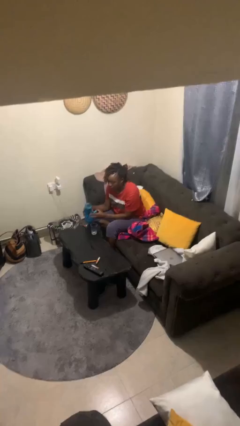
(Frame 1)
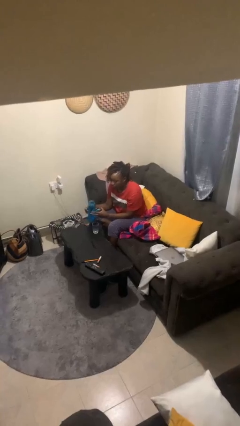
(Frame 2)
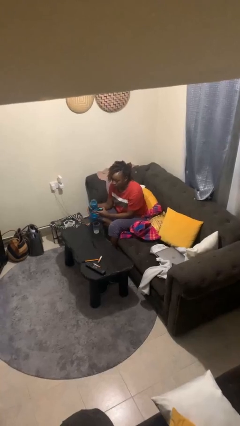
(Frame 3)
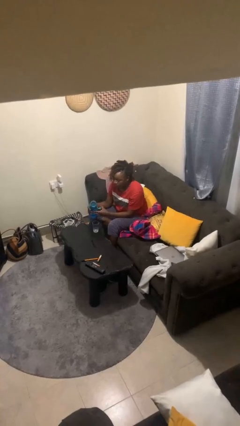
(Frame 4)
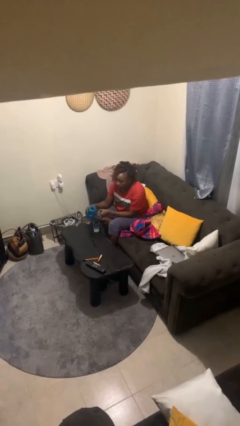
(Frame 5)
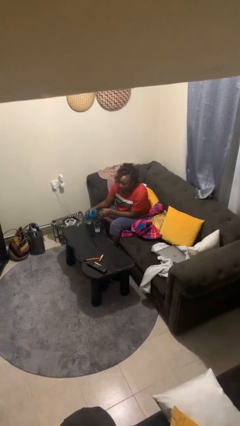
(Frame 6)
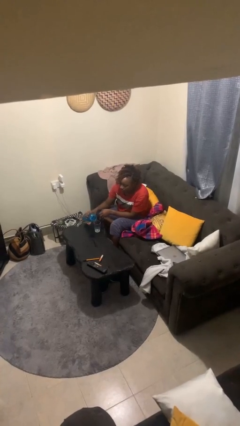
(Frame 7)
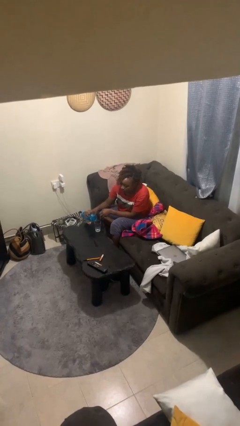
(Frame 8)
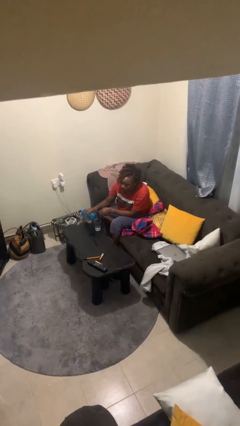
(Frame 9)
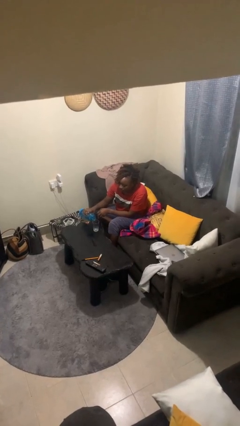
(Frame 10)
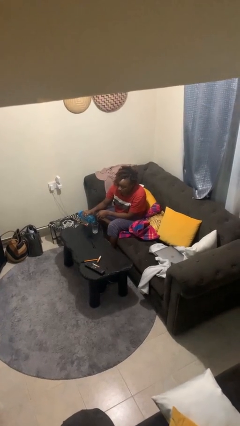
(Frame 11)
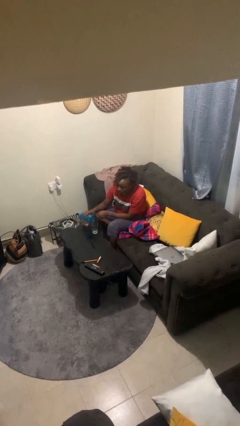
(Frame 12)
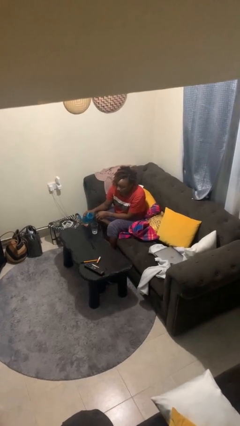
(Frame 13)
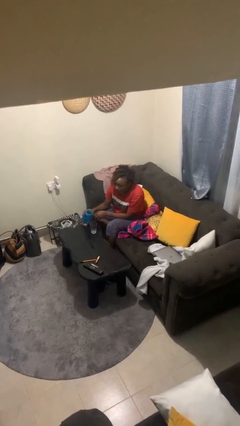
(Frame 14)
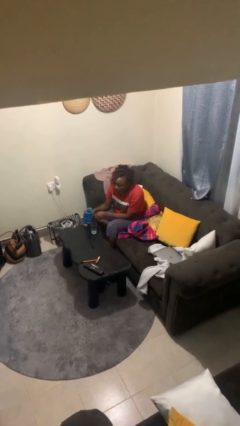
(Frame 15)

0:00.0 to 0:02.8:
person pours liquid into cup

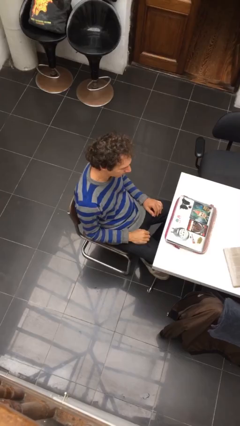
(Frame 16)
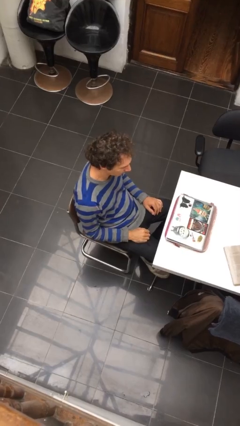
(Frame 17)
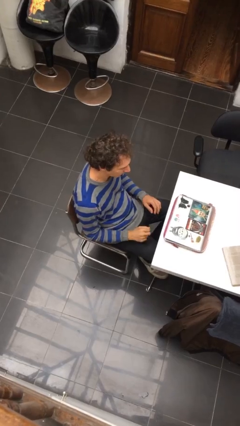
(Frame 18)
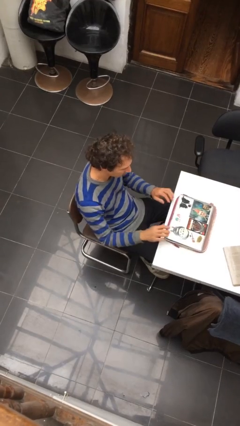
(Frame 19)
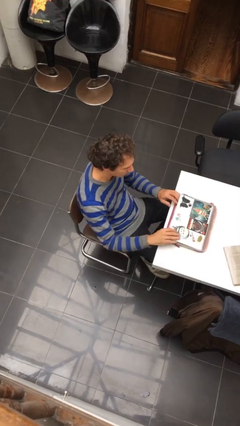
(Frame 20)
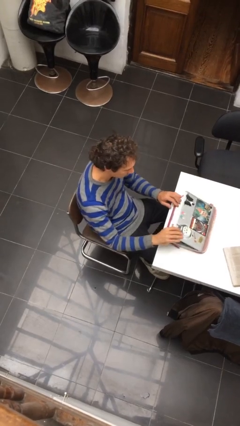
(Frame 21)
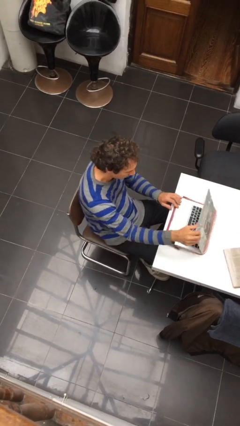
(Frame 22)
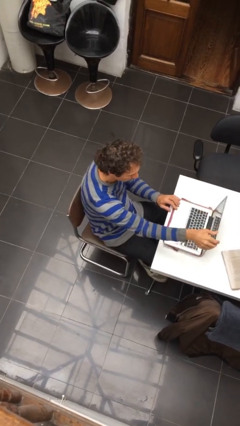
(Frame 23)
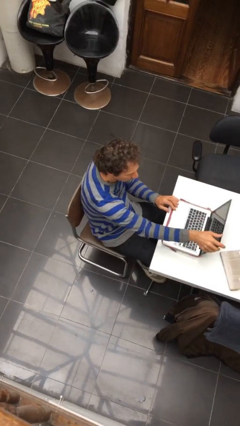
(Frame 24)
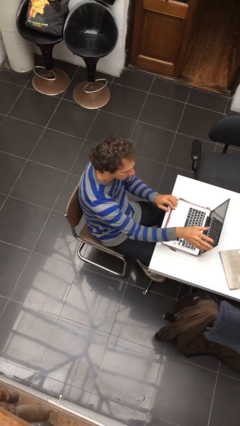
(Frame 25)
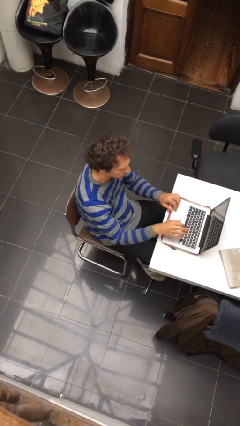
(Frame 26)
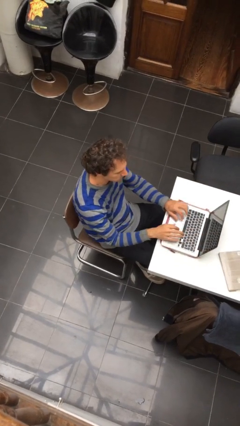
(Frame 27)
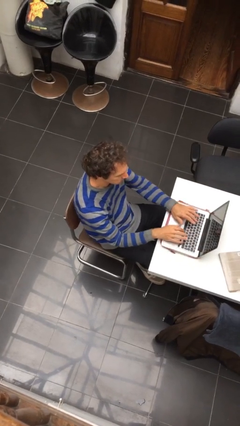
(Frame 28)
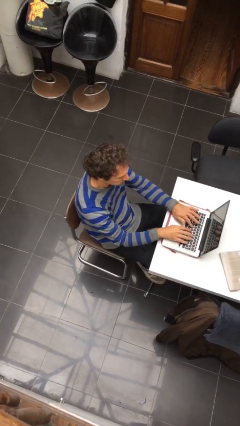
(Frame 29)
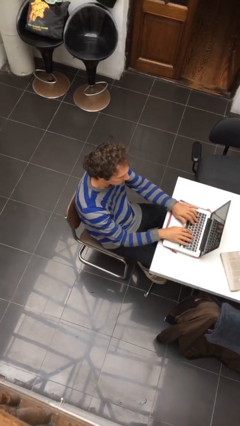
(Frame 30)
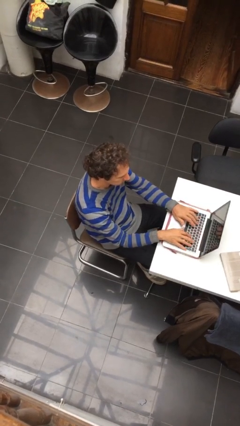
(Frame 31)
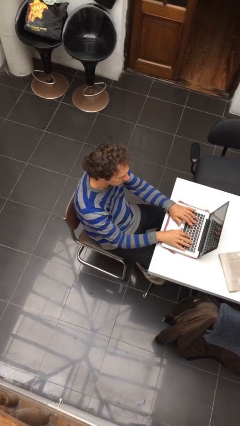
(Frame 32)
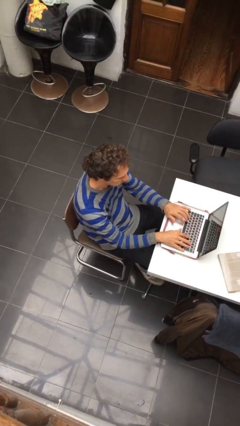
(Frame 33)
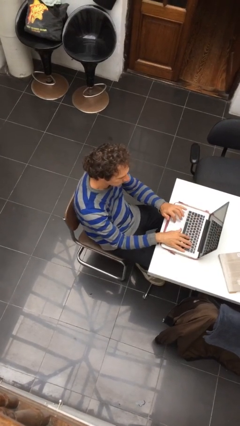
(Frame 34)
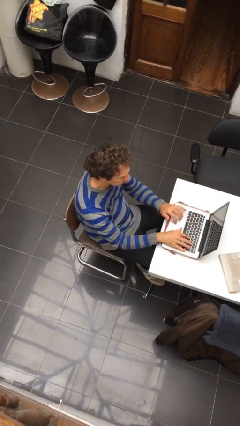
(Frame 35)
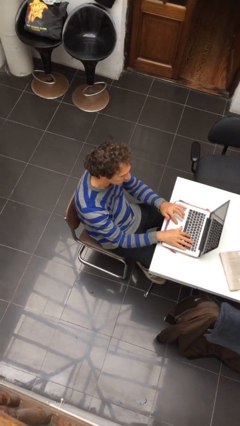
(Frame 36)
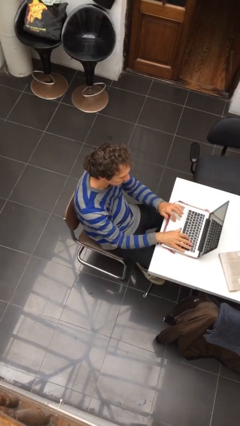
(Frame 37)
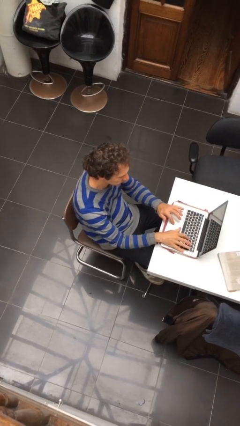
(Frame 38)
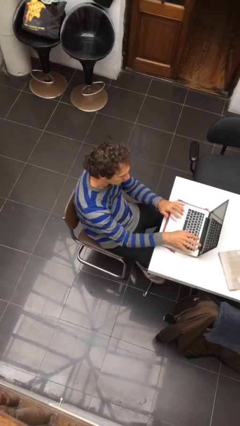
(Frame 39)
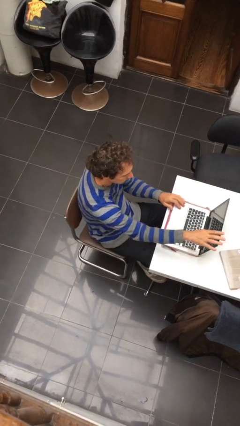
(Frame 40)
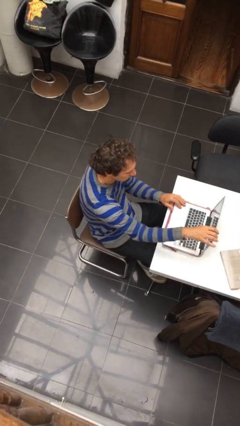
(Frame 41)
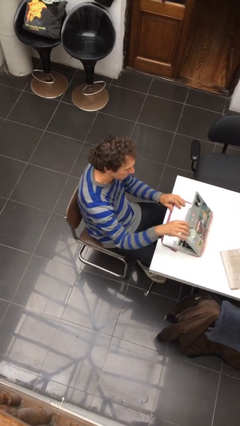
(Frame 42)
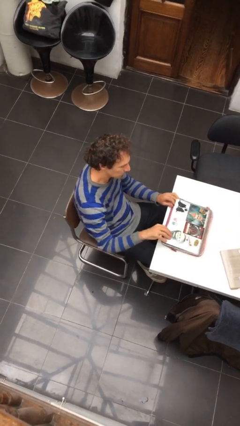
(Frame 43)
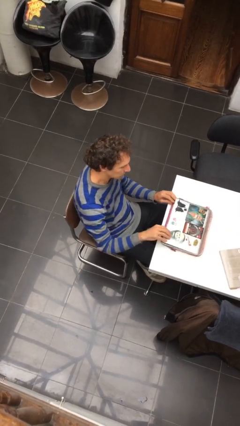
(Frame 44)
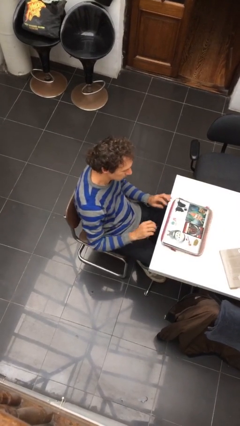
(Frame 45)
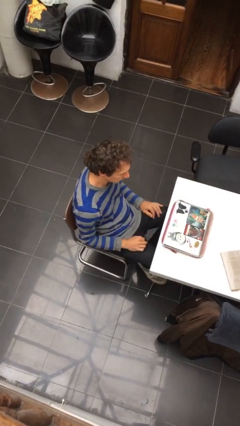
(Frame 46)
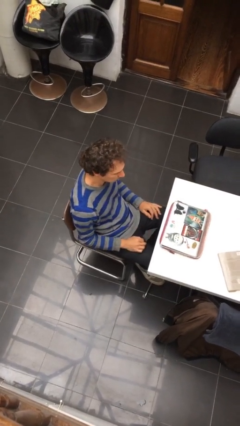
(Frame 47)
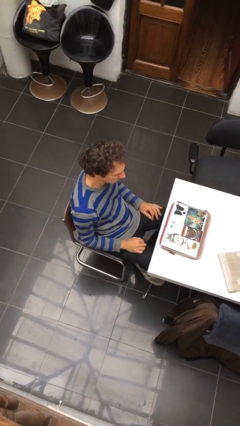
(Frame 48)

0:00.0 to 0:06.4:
person interacts with laptop

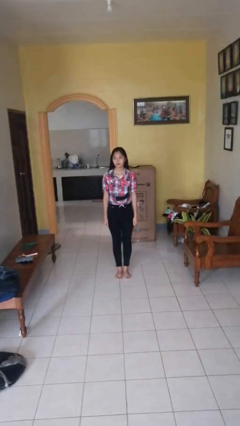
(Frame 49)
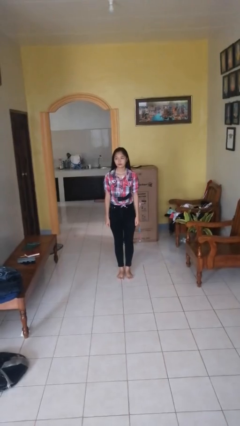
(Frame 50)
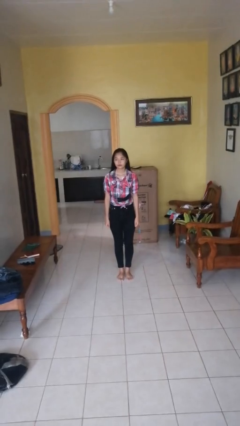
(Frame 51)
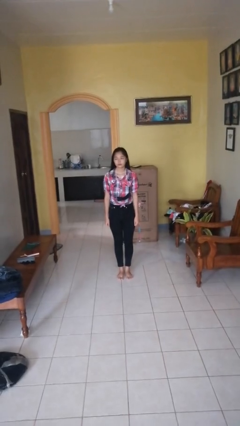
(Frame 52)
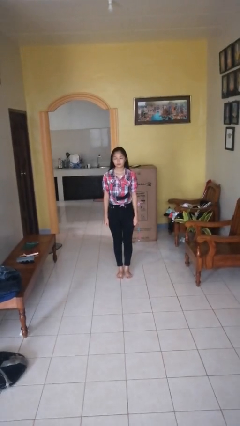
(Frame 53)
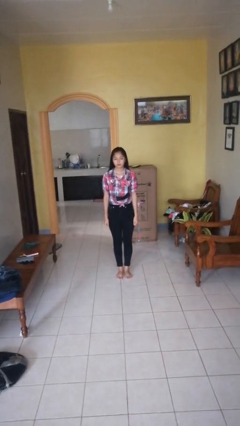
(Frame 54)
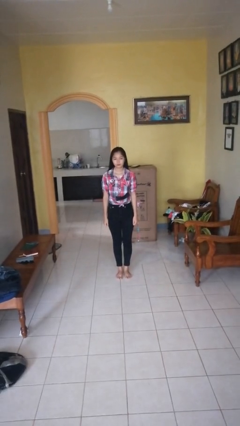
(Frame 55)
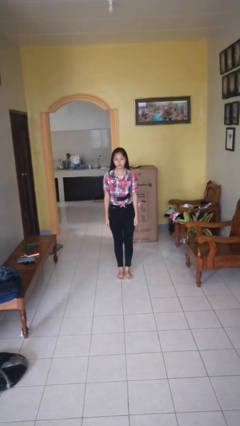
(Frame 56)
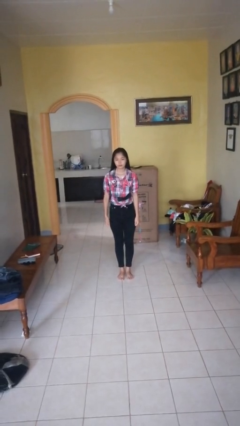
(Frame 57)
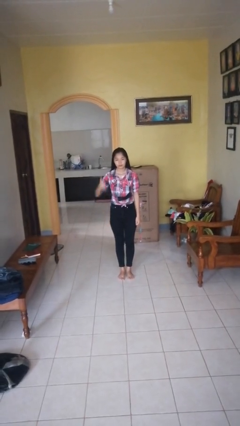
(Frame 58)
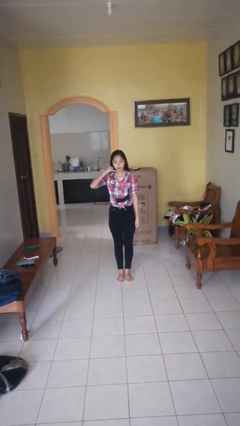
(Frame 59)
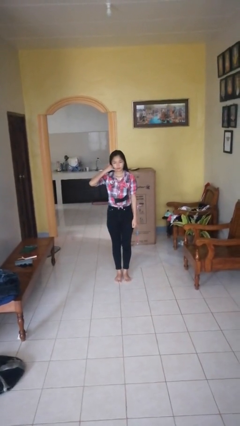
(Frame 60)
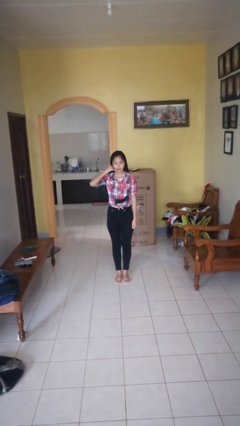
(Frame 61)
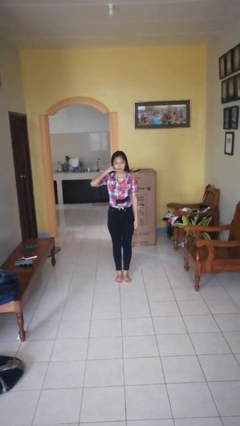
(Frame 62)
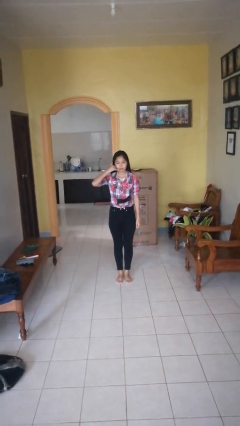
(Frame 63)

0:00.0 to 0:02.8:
person gestures call me

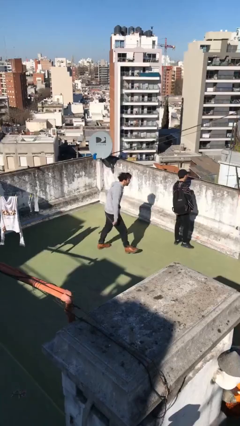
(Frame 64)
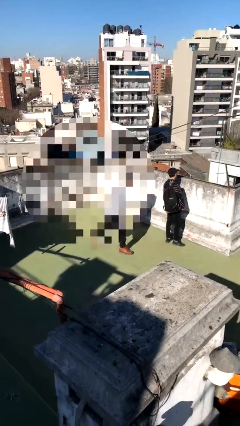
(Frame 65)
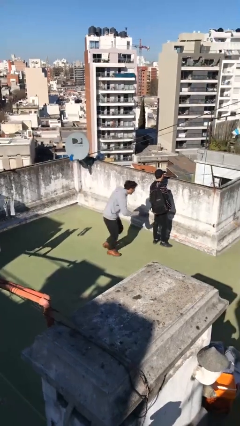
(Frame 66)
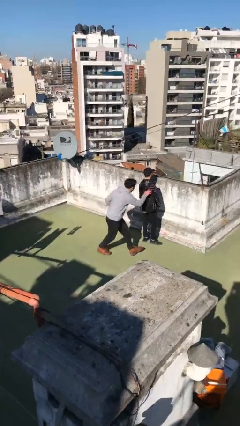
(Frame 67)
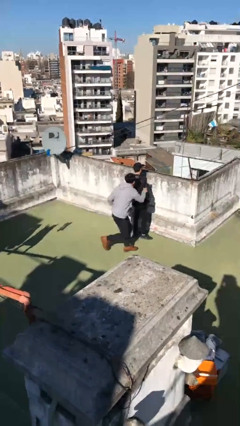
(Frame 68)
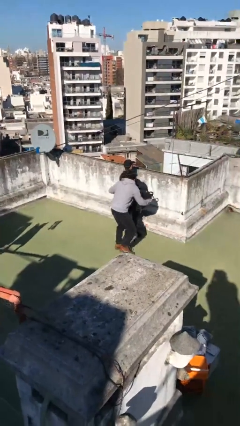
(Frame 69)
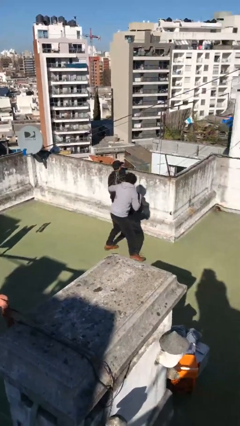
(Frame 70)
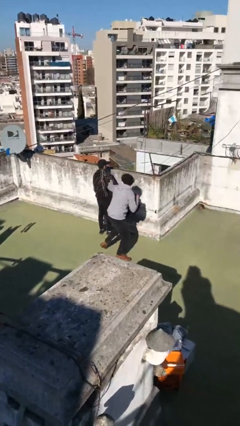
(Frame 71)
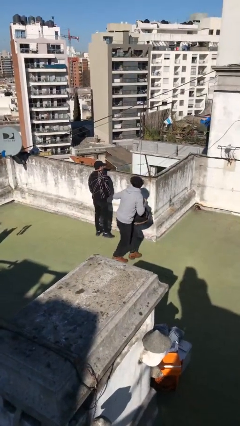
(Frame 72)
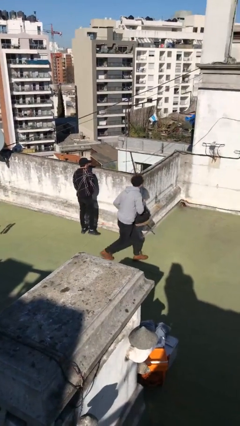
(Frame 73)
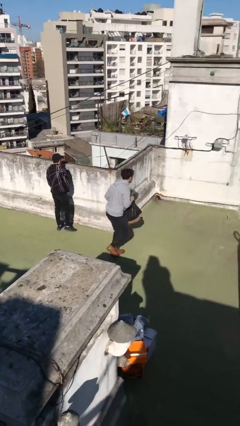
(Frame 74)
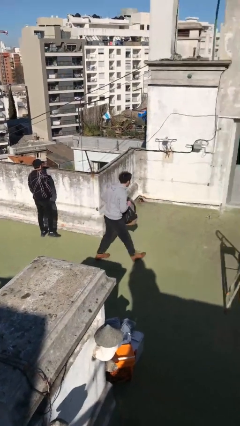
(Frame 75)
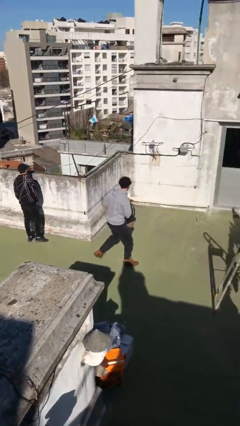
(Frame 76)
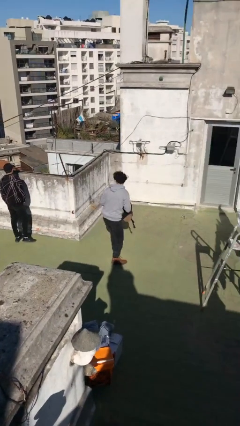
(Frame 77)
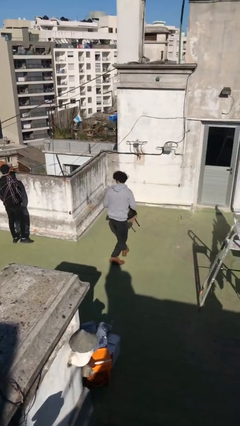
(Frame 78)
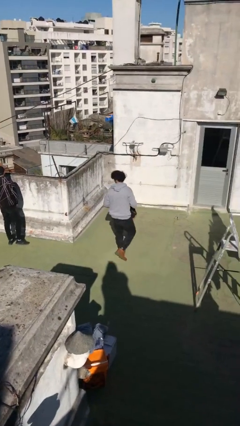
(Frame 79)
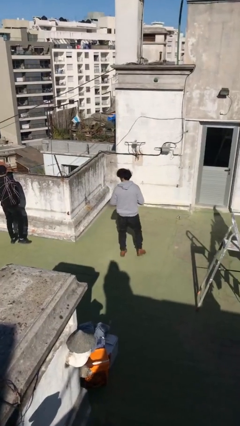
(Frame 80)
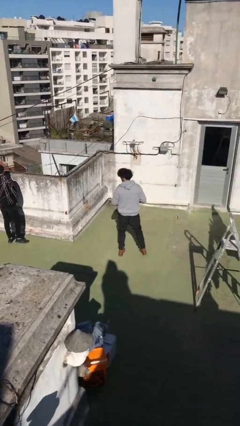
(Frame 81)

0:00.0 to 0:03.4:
person steals object from person

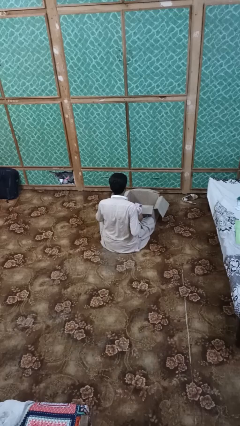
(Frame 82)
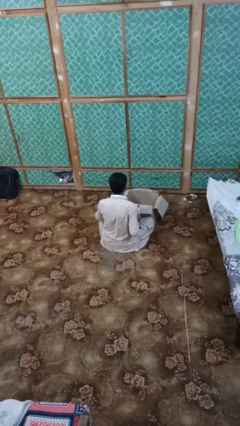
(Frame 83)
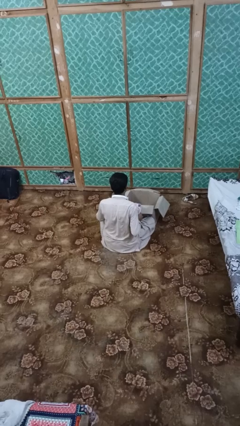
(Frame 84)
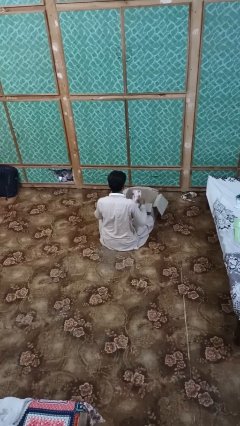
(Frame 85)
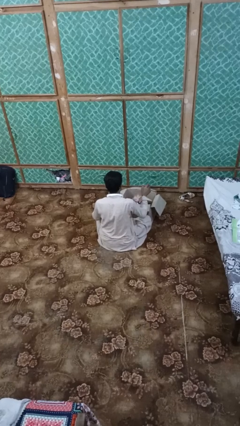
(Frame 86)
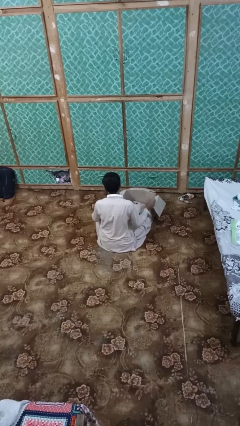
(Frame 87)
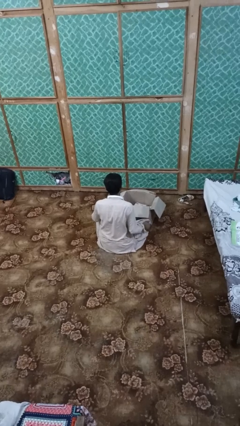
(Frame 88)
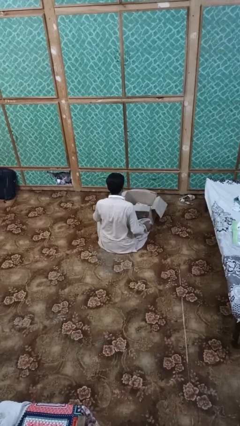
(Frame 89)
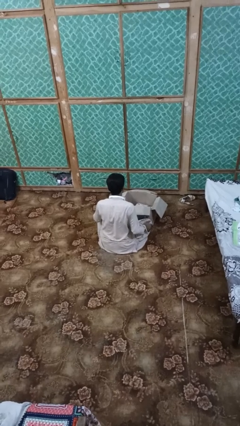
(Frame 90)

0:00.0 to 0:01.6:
person puts object into box

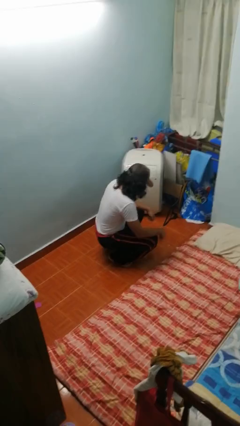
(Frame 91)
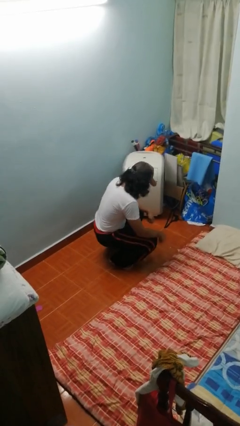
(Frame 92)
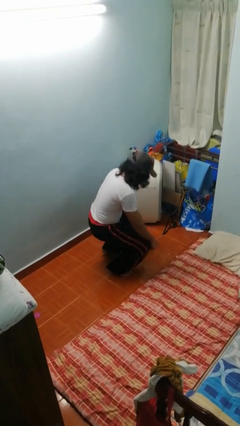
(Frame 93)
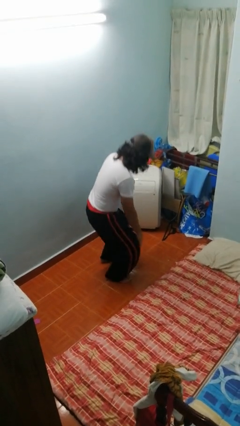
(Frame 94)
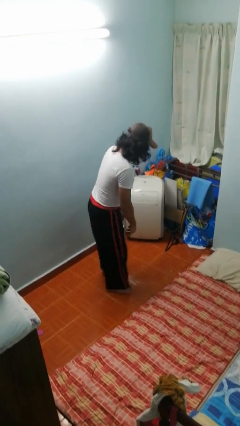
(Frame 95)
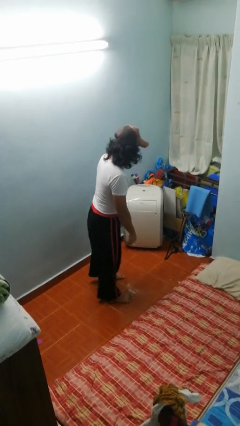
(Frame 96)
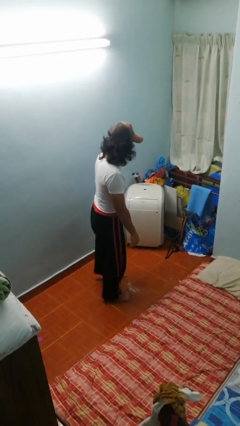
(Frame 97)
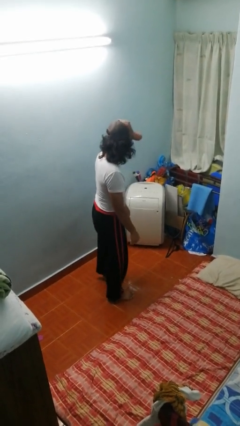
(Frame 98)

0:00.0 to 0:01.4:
person stands up
